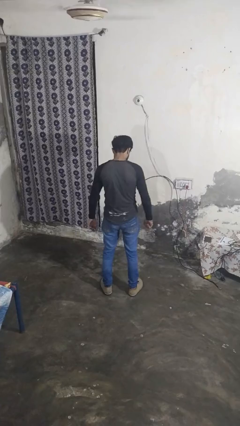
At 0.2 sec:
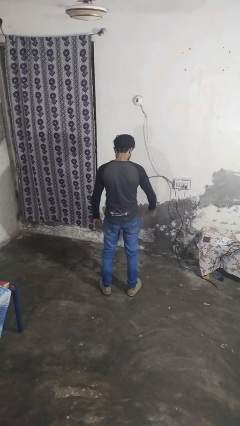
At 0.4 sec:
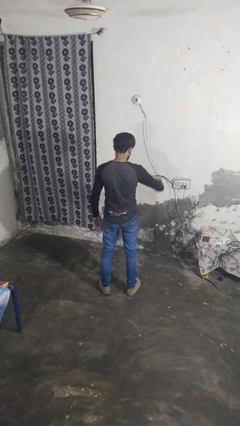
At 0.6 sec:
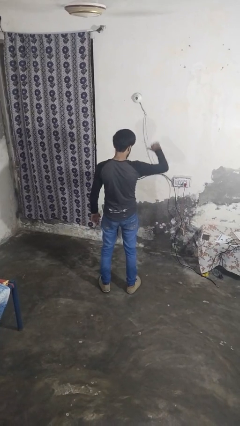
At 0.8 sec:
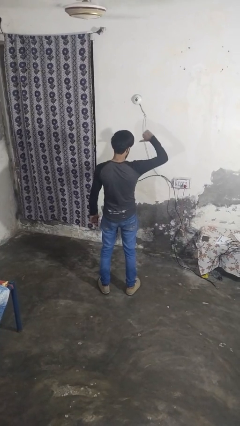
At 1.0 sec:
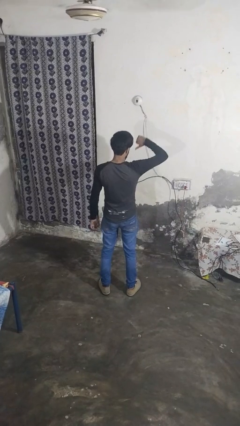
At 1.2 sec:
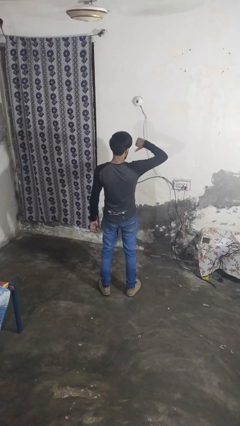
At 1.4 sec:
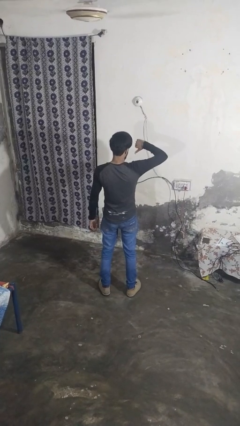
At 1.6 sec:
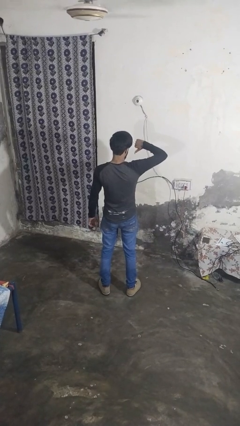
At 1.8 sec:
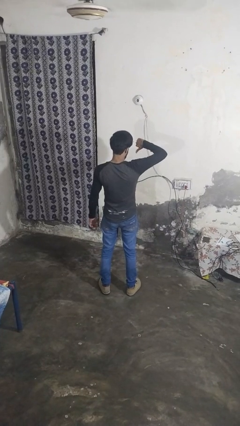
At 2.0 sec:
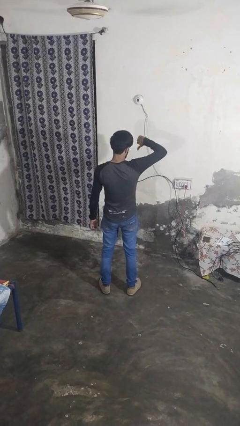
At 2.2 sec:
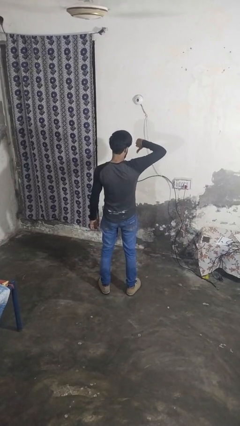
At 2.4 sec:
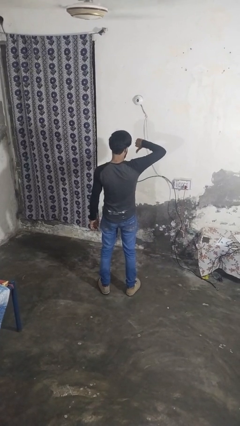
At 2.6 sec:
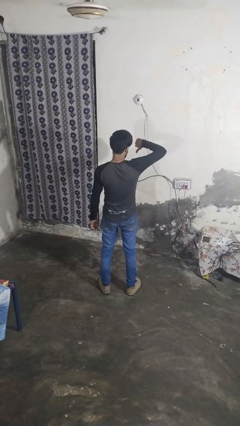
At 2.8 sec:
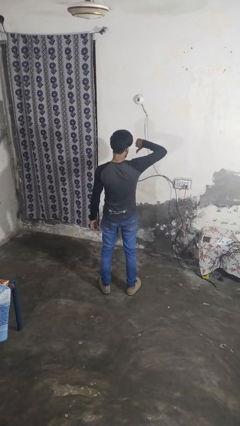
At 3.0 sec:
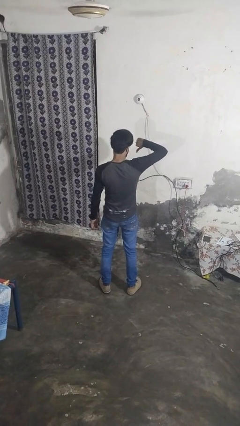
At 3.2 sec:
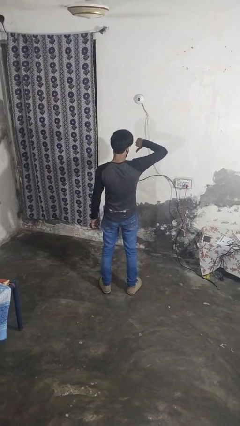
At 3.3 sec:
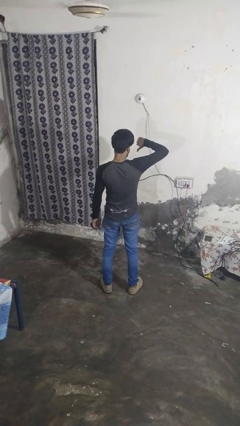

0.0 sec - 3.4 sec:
person gestures thumbs down

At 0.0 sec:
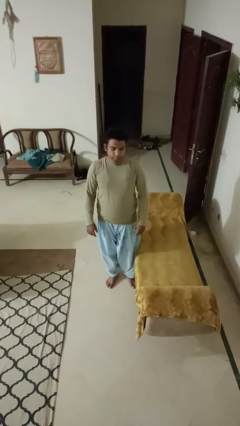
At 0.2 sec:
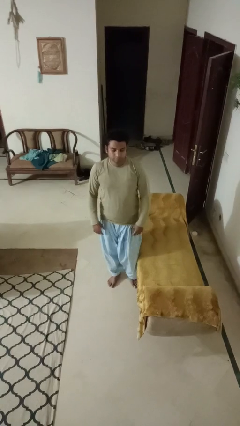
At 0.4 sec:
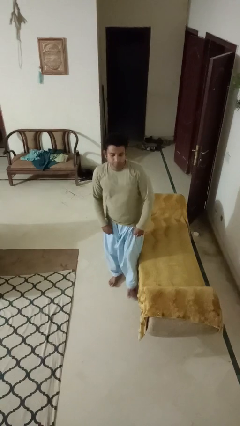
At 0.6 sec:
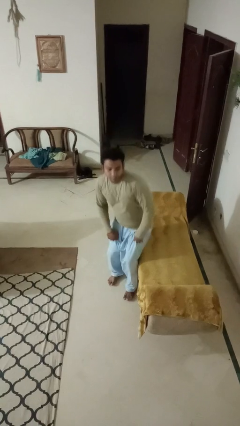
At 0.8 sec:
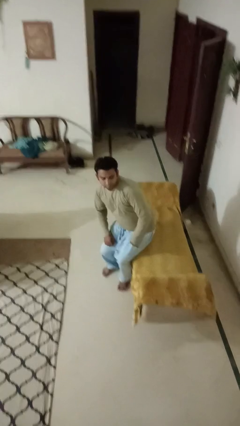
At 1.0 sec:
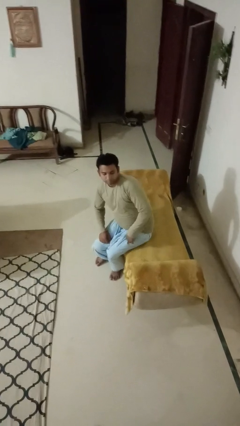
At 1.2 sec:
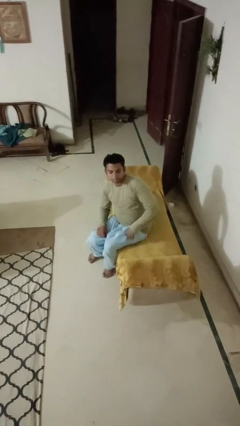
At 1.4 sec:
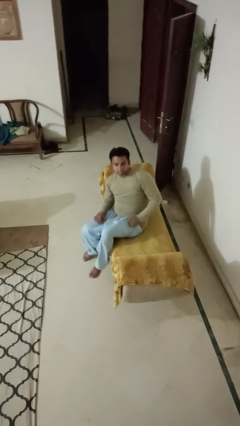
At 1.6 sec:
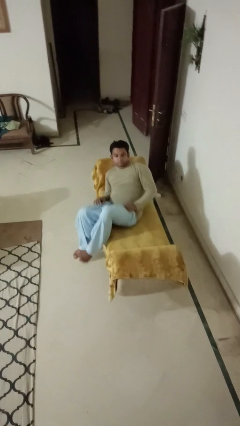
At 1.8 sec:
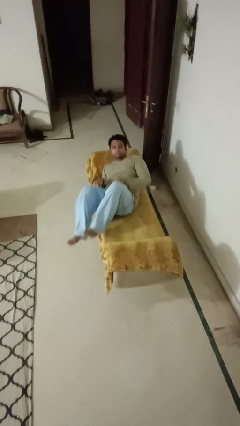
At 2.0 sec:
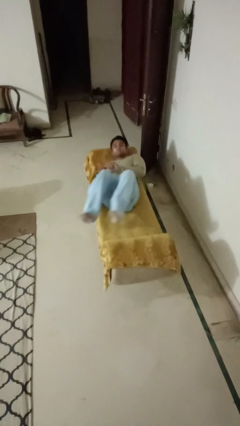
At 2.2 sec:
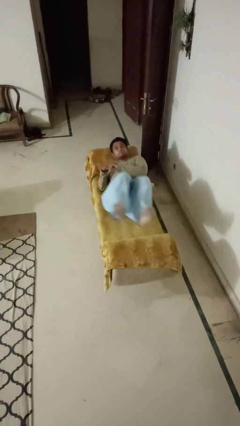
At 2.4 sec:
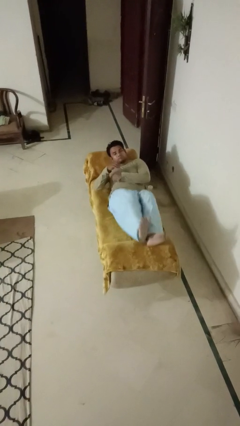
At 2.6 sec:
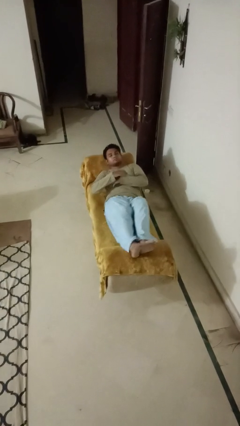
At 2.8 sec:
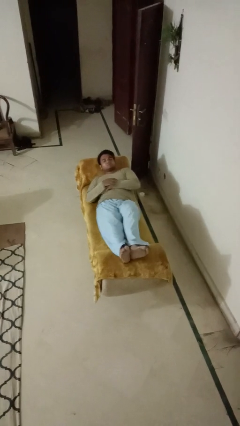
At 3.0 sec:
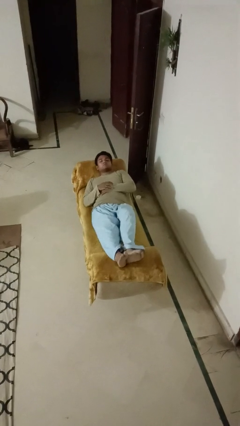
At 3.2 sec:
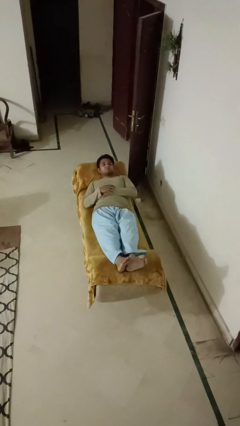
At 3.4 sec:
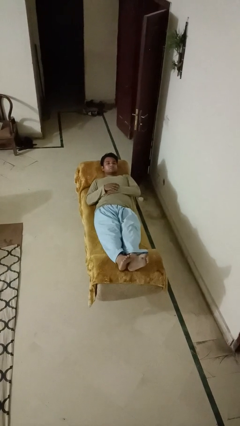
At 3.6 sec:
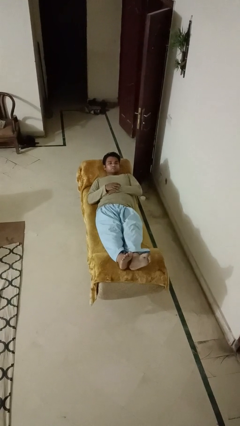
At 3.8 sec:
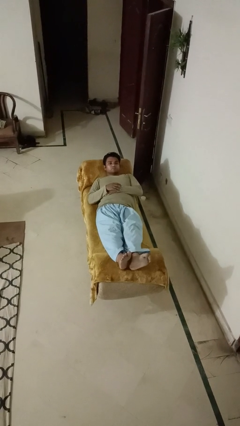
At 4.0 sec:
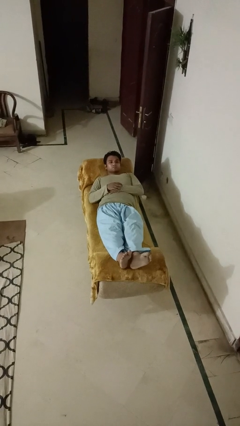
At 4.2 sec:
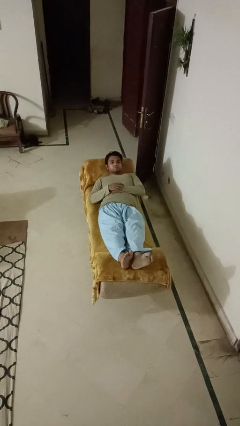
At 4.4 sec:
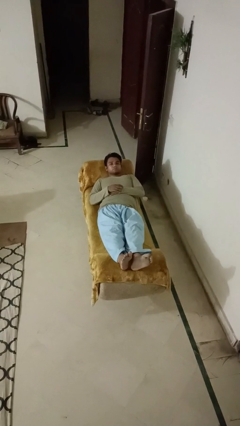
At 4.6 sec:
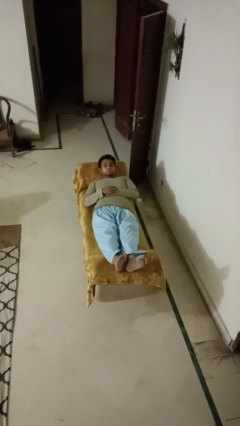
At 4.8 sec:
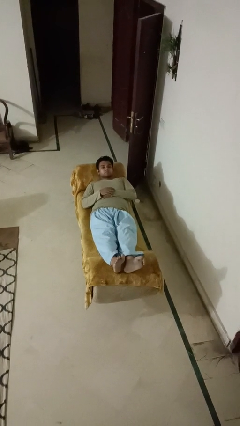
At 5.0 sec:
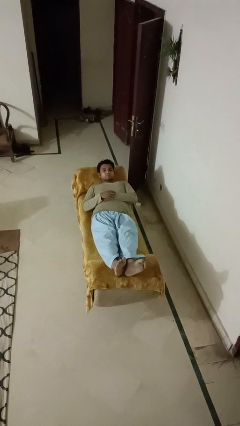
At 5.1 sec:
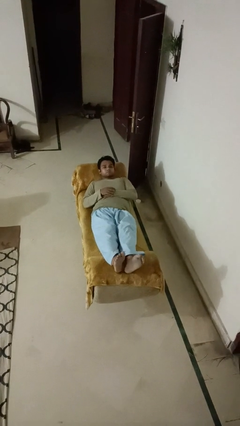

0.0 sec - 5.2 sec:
person lies down on couch

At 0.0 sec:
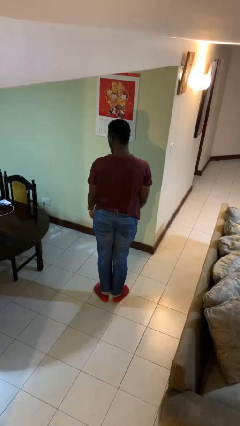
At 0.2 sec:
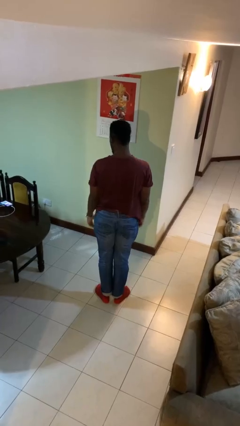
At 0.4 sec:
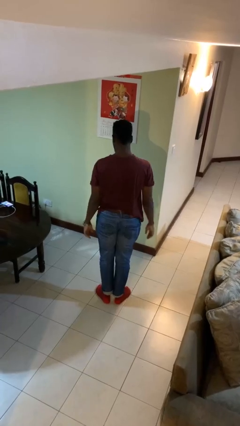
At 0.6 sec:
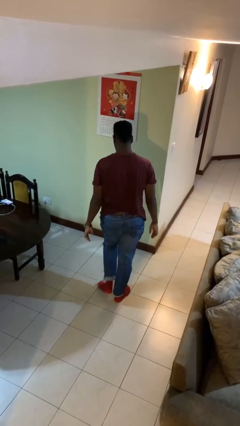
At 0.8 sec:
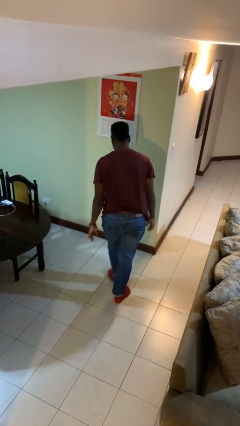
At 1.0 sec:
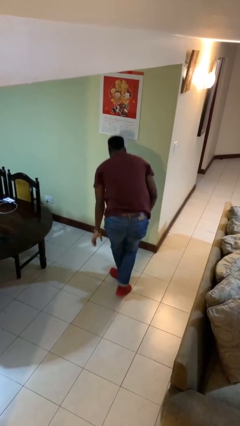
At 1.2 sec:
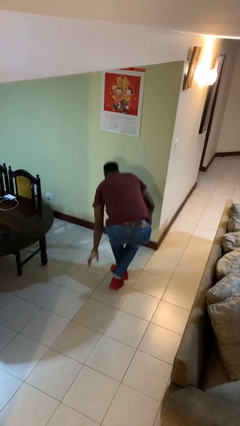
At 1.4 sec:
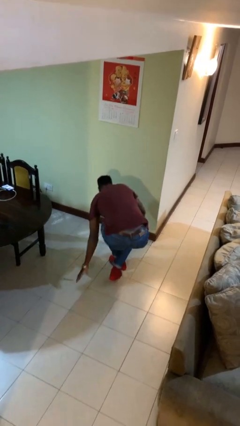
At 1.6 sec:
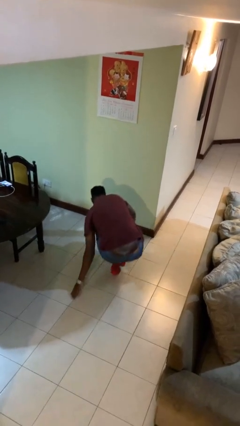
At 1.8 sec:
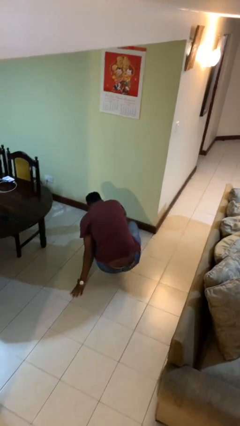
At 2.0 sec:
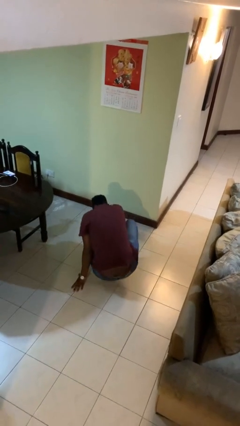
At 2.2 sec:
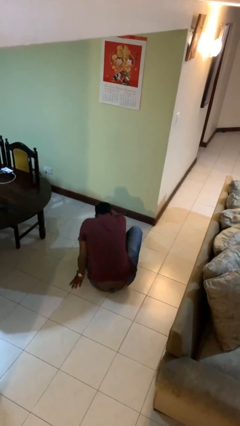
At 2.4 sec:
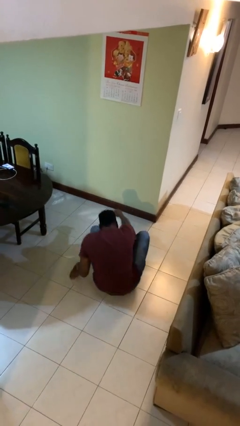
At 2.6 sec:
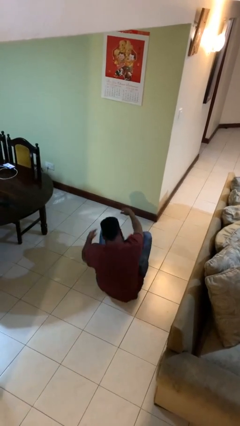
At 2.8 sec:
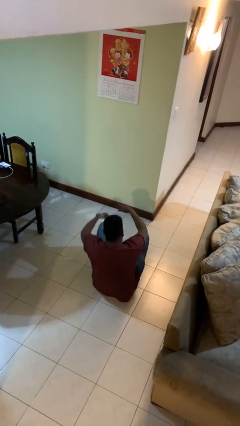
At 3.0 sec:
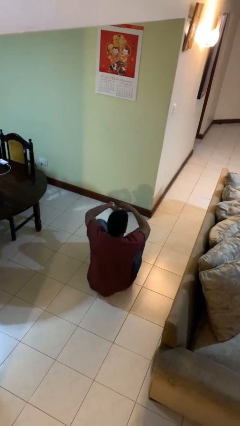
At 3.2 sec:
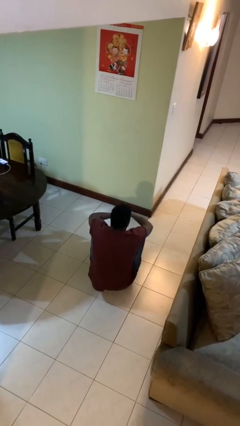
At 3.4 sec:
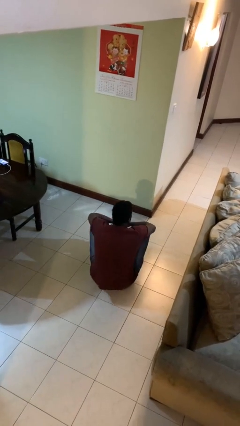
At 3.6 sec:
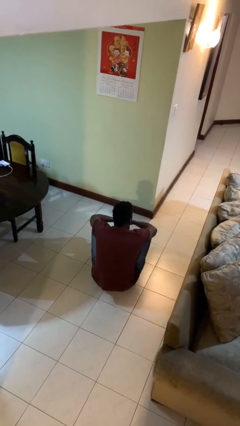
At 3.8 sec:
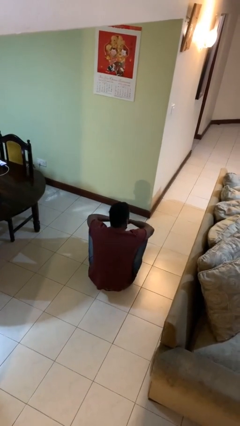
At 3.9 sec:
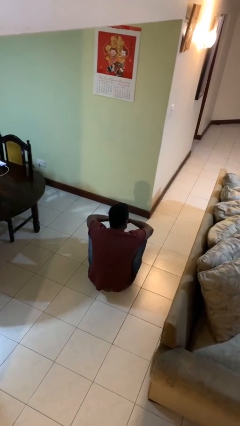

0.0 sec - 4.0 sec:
person sits crisscross

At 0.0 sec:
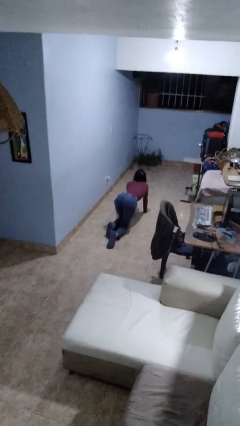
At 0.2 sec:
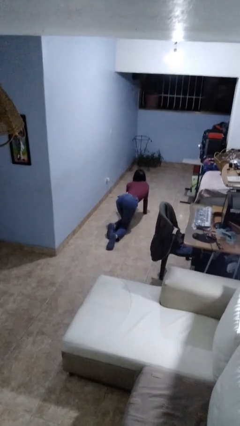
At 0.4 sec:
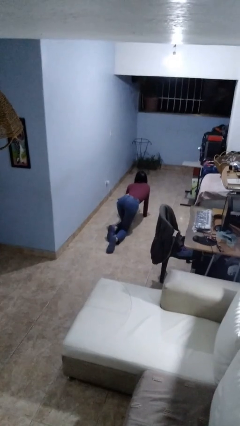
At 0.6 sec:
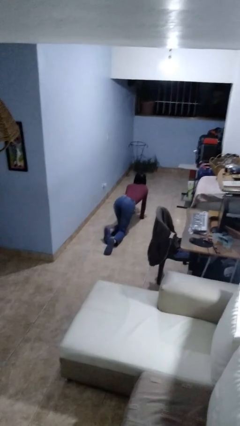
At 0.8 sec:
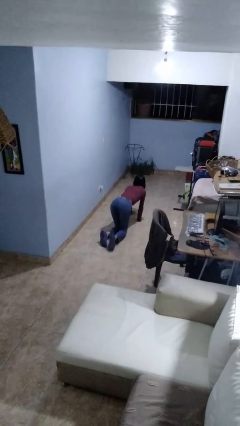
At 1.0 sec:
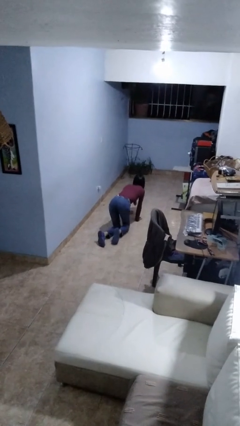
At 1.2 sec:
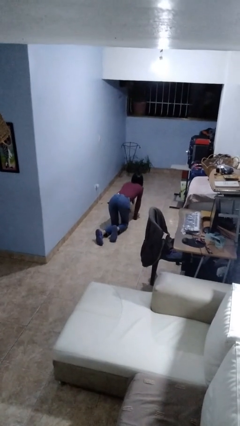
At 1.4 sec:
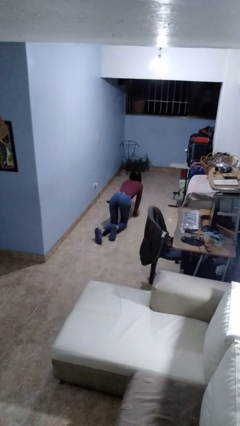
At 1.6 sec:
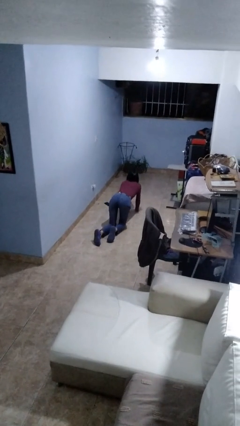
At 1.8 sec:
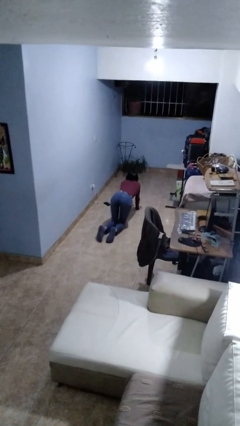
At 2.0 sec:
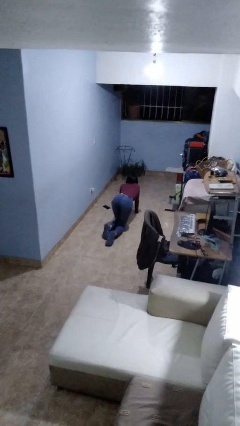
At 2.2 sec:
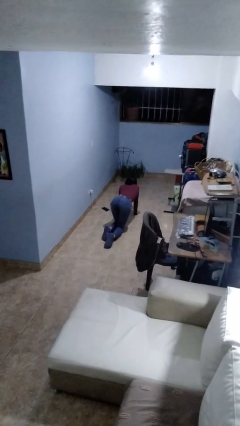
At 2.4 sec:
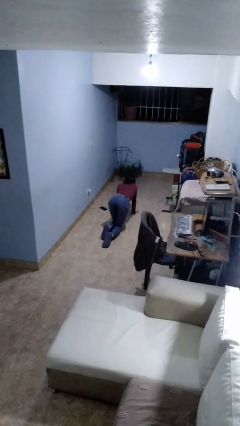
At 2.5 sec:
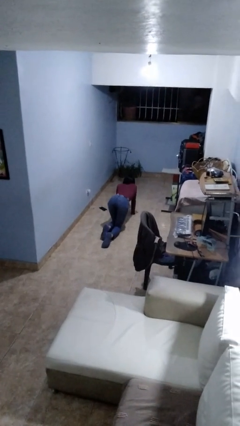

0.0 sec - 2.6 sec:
person crawls

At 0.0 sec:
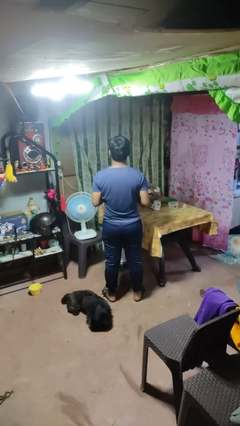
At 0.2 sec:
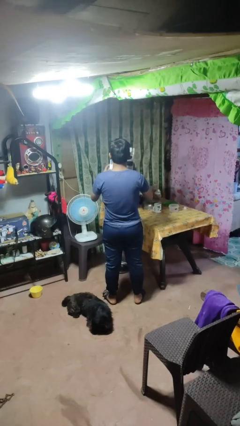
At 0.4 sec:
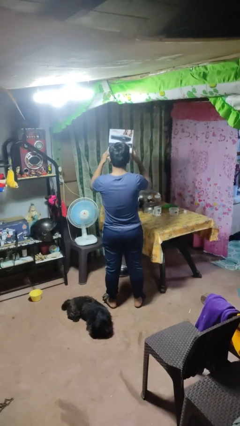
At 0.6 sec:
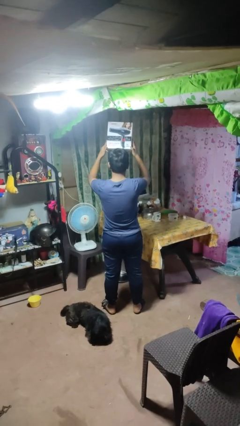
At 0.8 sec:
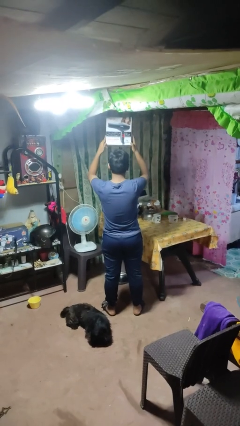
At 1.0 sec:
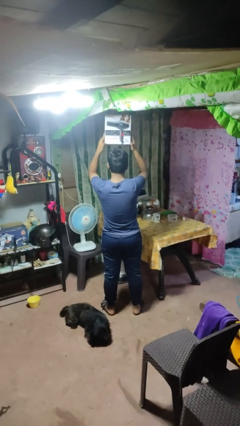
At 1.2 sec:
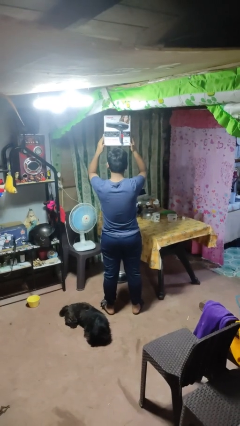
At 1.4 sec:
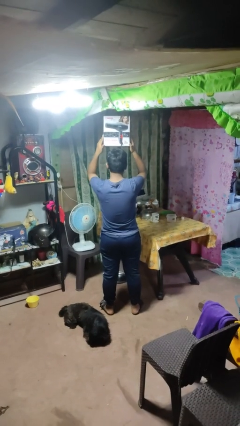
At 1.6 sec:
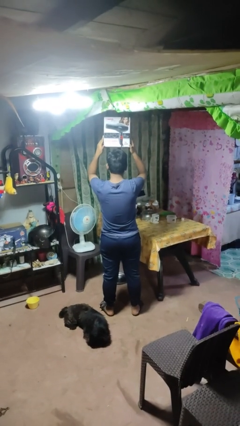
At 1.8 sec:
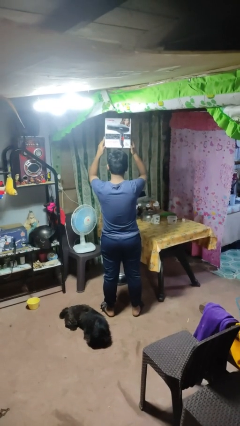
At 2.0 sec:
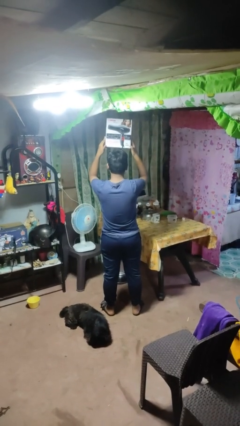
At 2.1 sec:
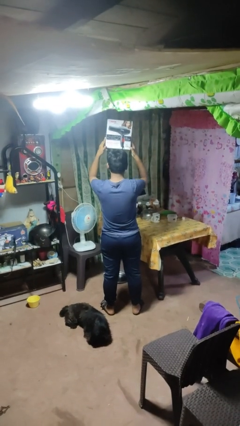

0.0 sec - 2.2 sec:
person holds object above head
